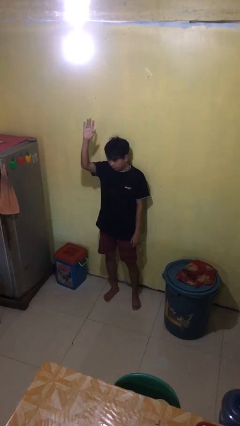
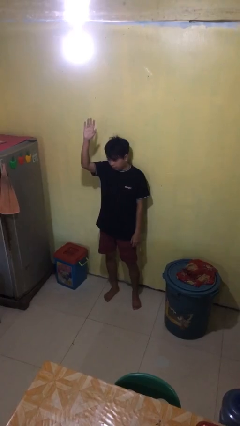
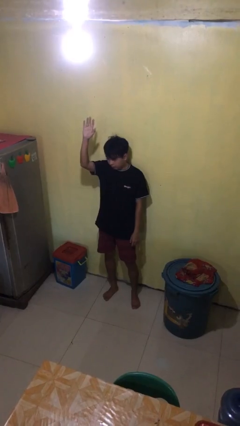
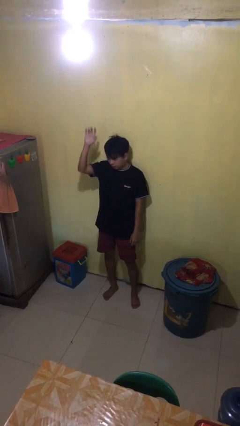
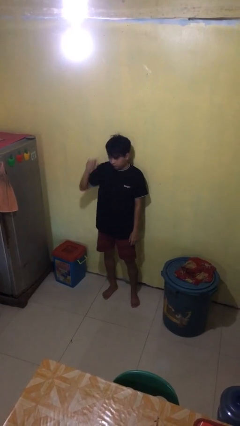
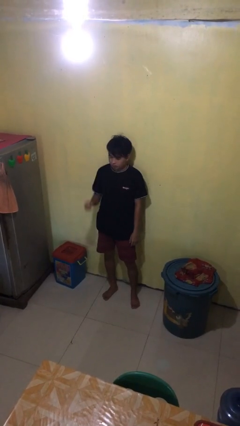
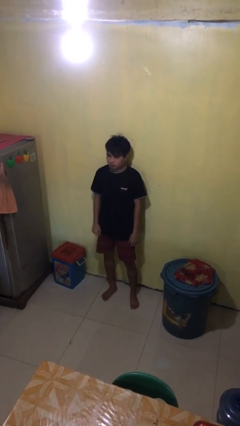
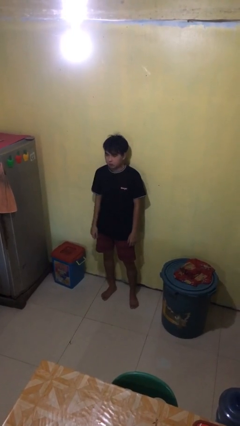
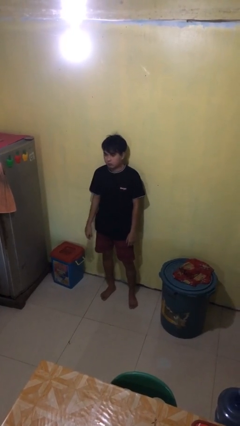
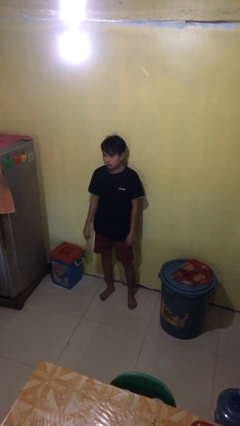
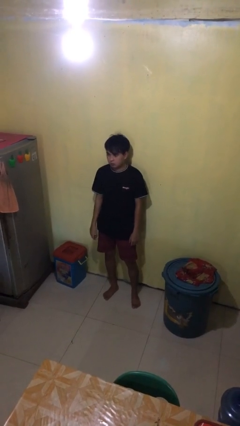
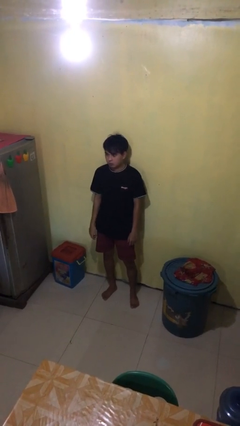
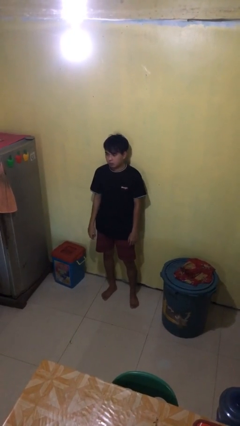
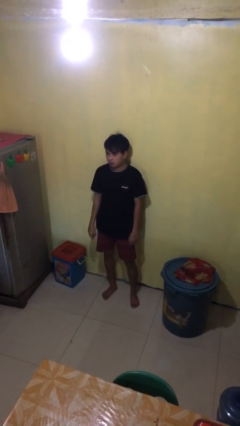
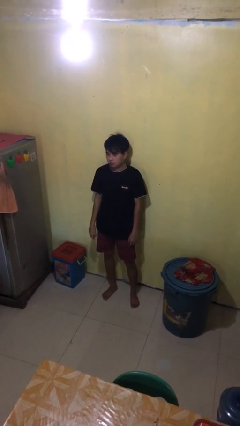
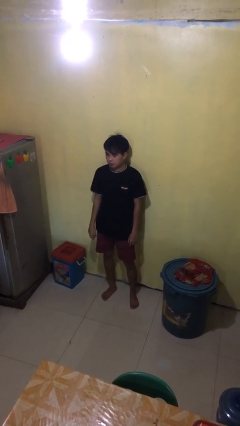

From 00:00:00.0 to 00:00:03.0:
person gestures lower hand

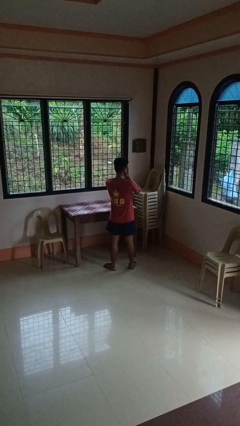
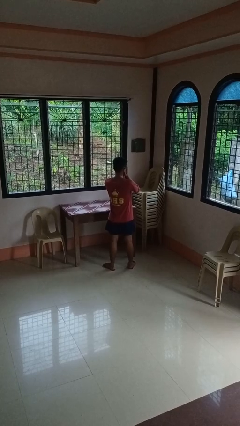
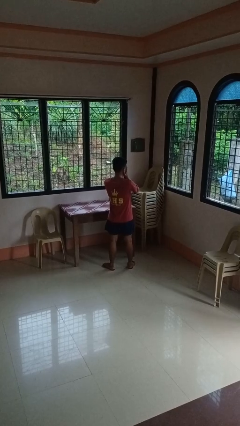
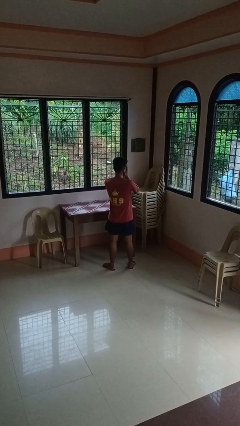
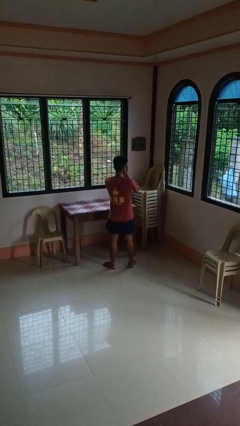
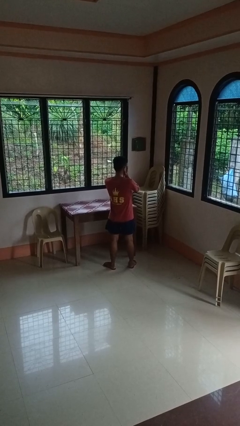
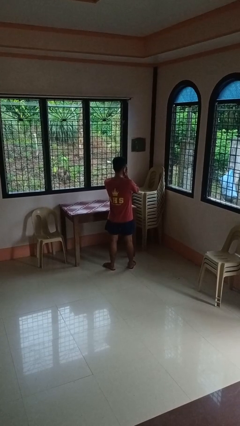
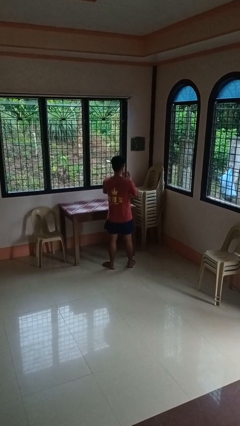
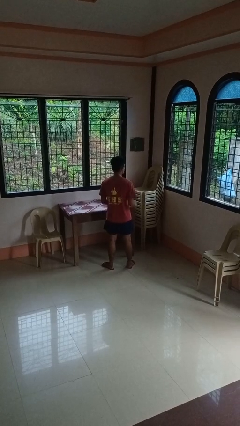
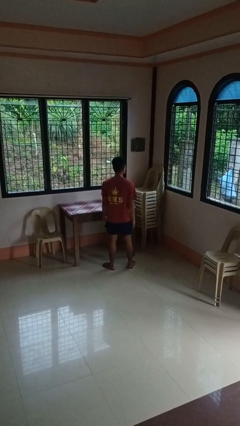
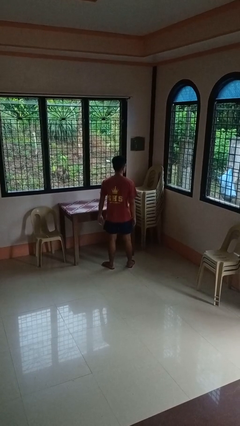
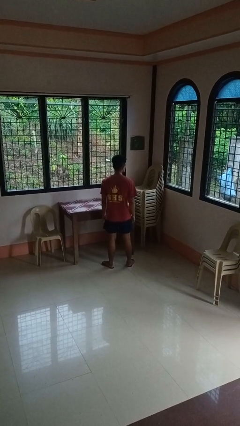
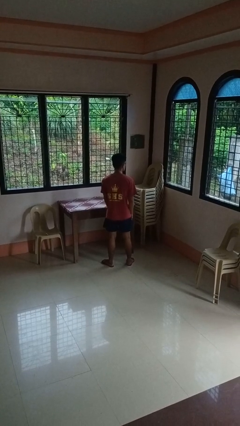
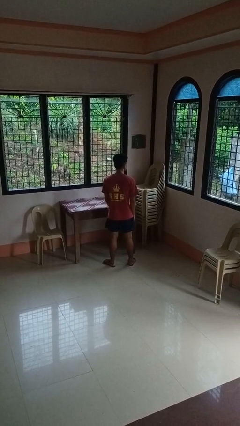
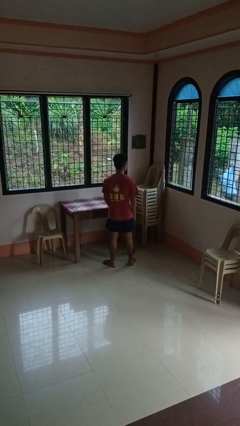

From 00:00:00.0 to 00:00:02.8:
person covers face with hands

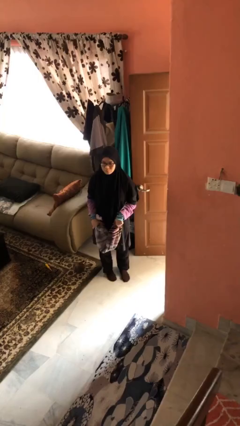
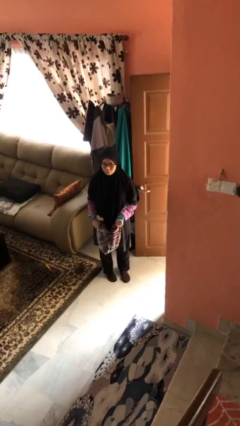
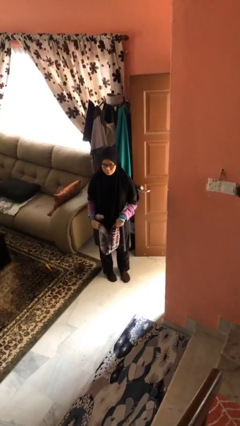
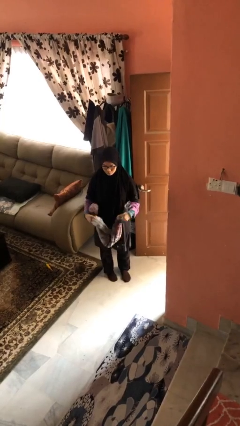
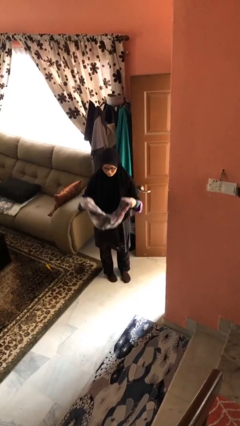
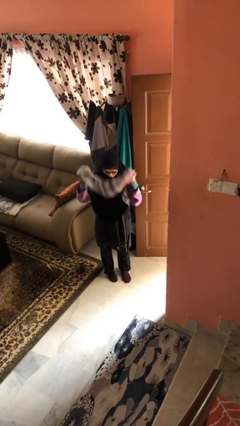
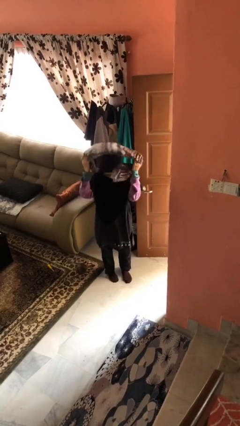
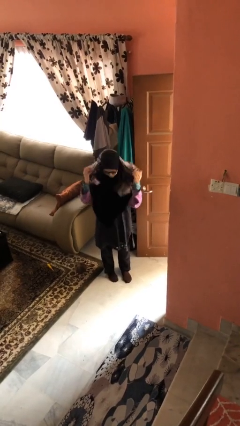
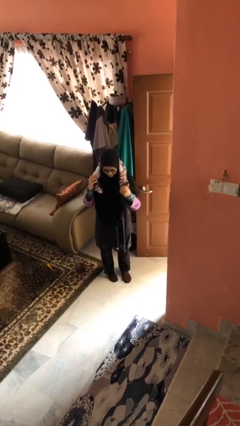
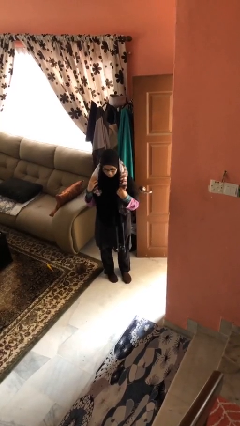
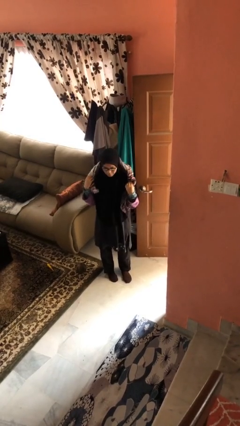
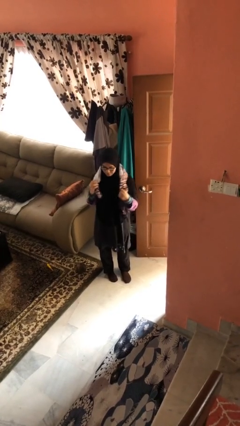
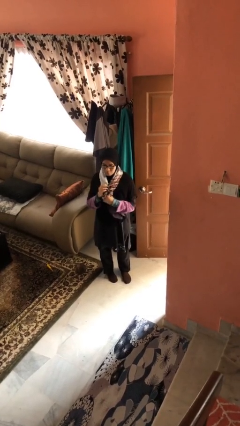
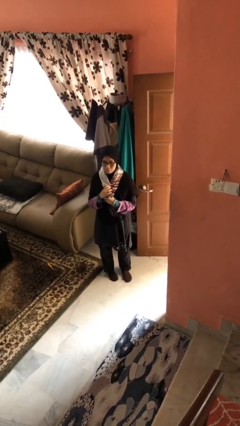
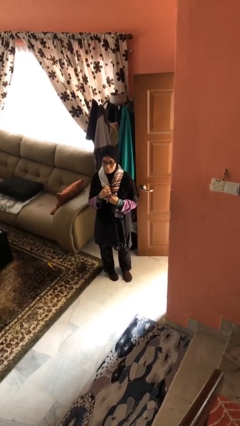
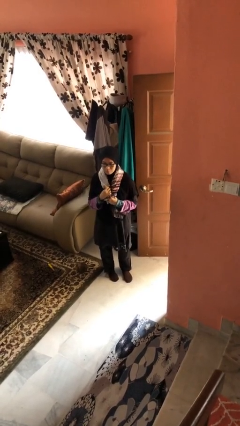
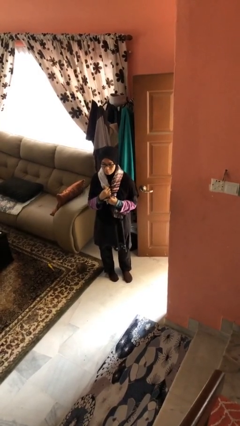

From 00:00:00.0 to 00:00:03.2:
person puts on scarf

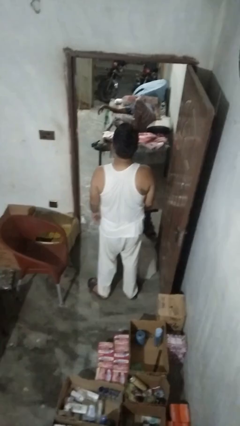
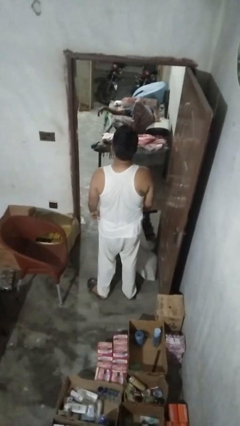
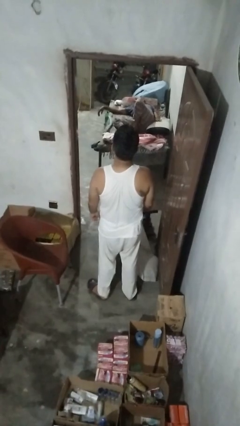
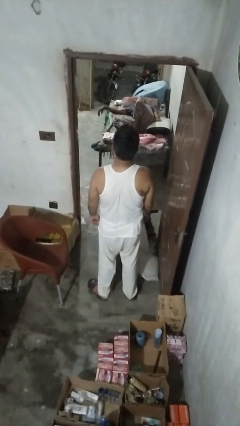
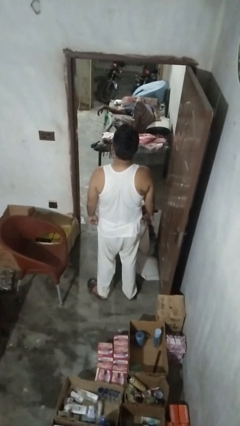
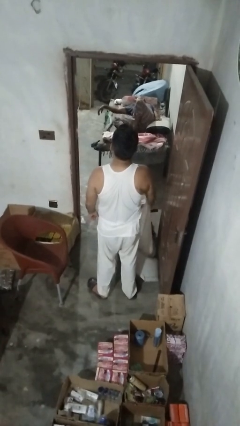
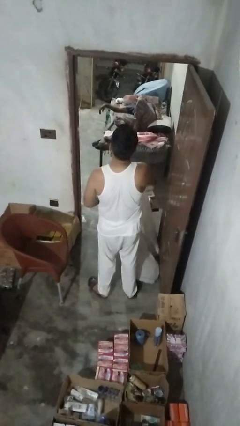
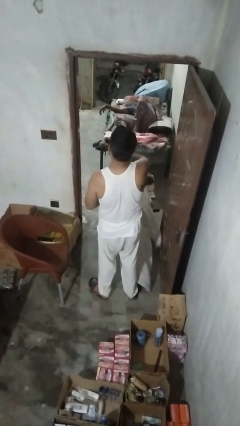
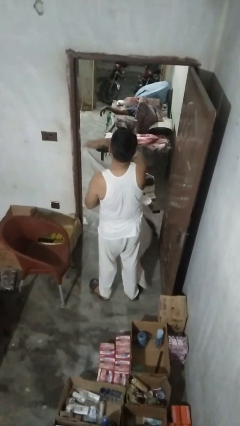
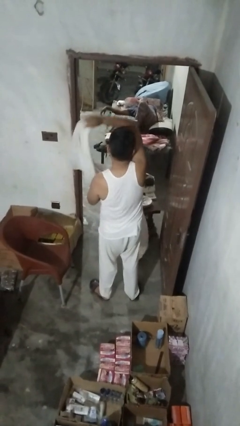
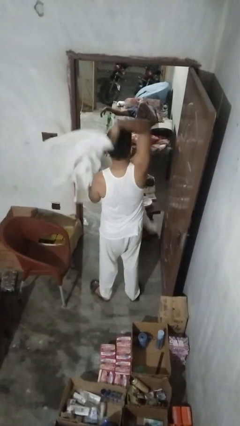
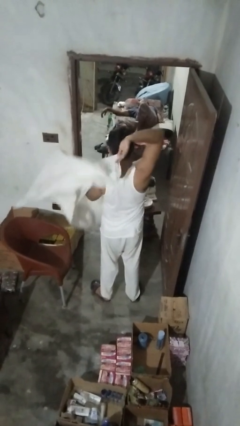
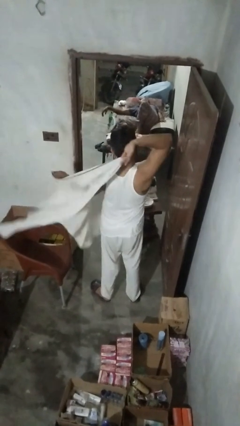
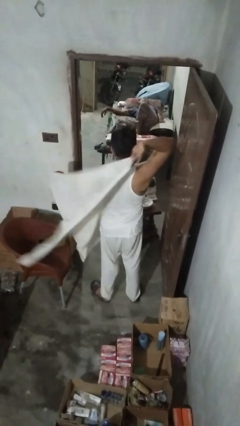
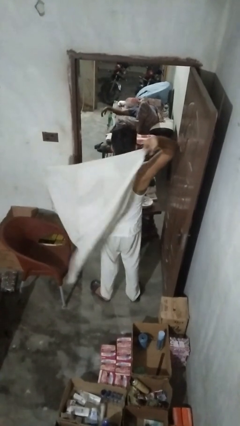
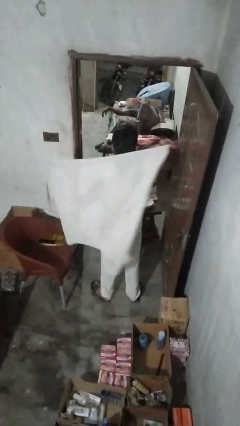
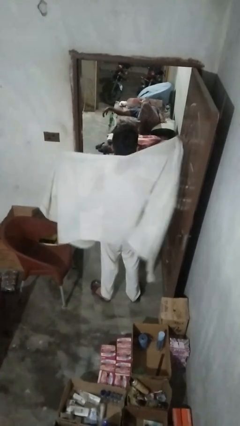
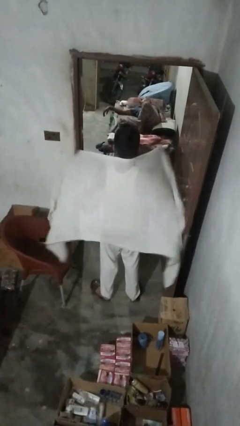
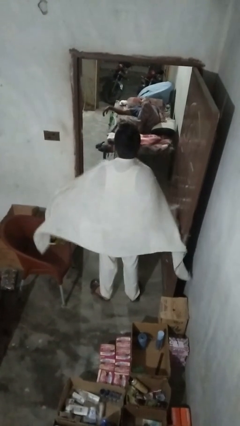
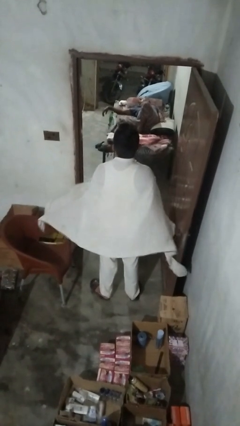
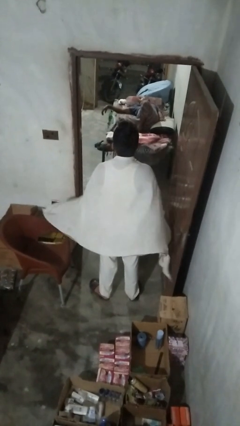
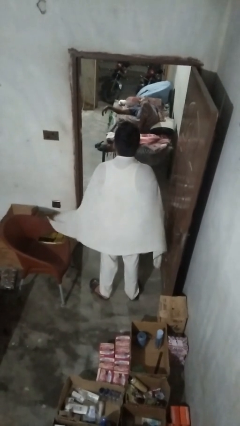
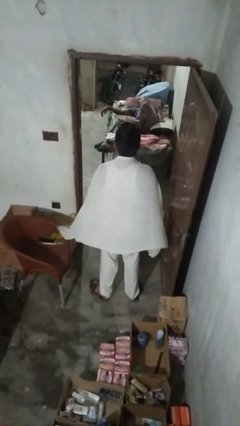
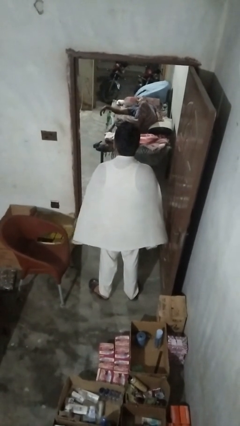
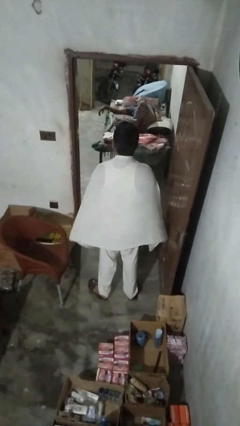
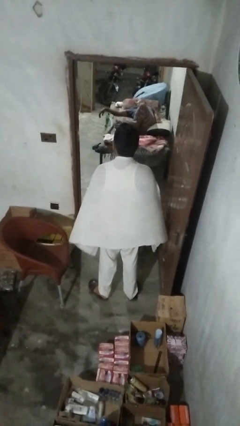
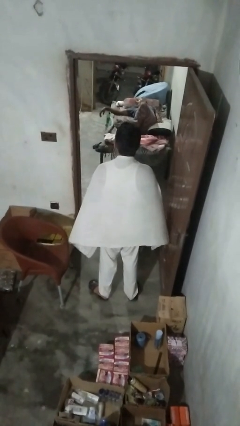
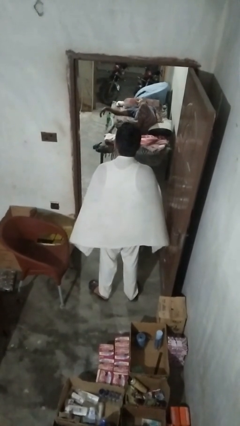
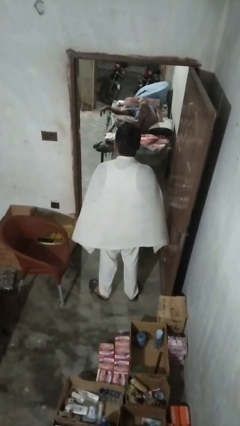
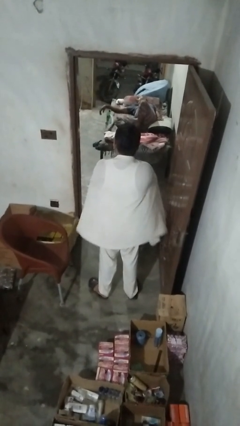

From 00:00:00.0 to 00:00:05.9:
person folds blanket

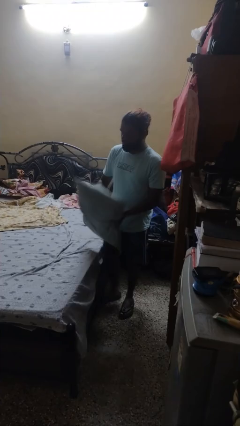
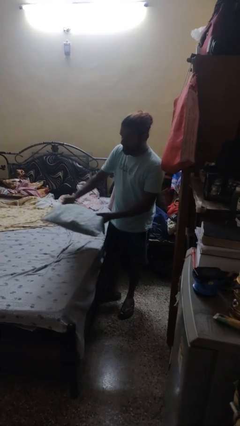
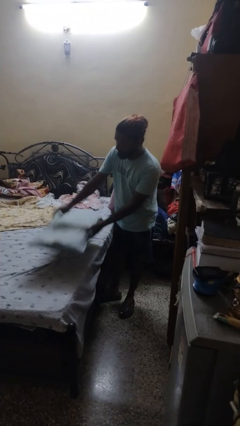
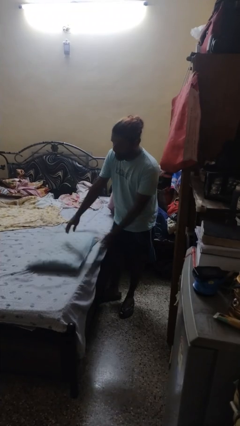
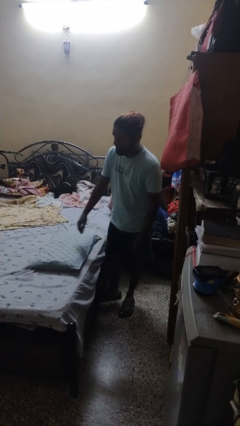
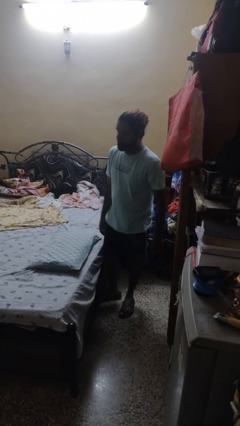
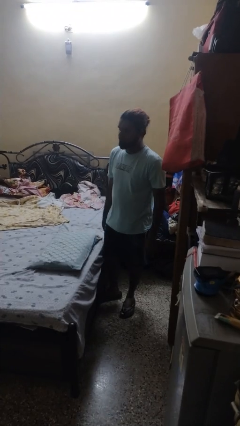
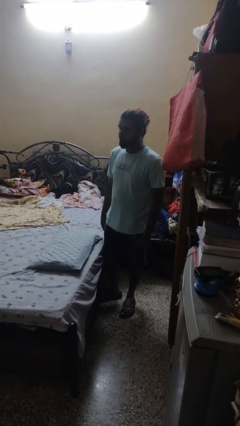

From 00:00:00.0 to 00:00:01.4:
person puts down object on bed

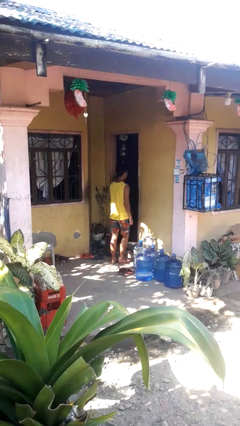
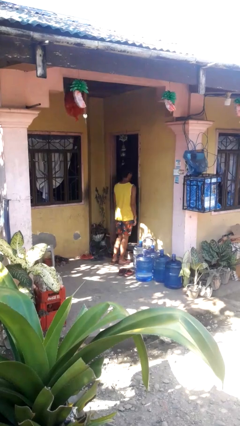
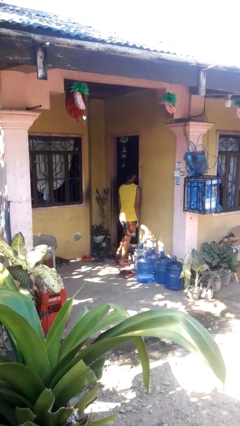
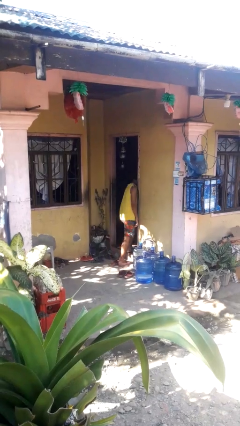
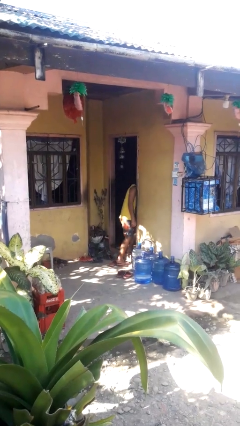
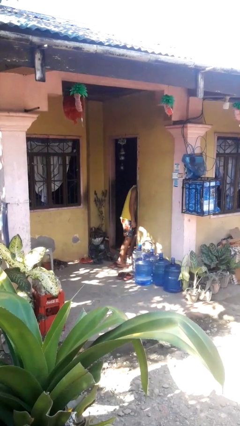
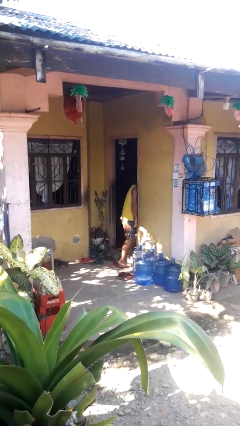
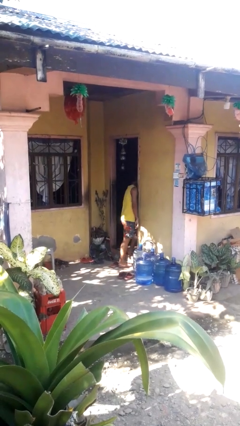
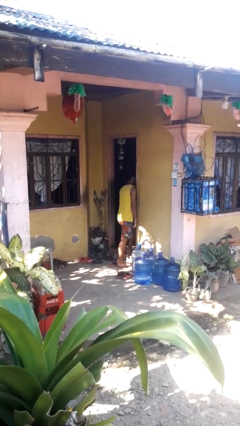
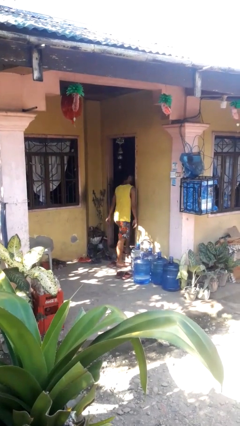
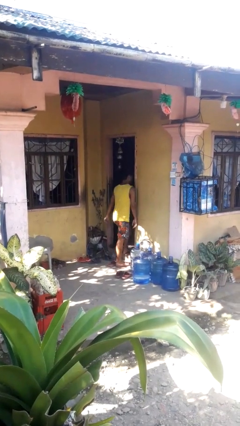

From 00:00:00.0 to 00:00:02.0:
person bumps into wall
